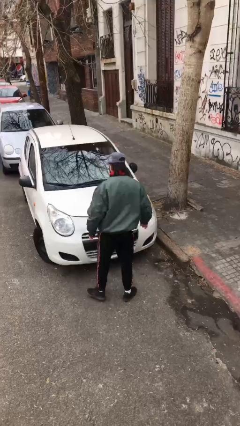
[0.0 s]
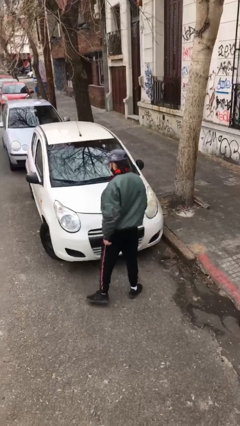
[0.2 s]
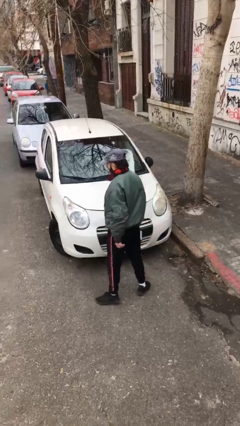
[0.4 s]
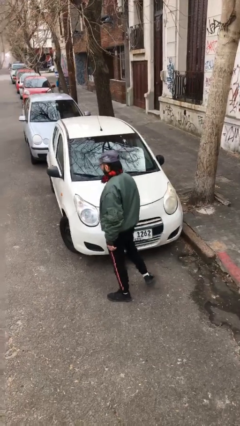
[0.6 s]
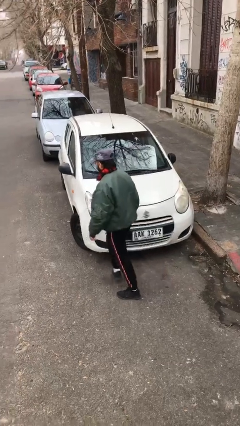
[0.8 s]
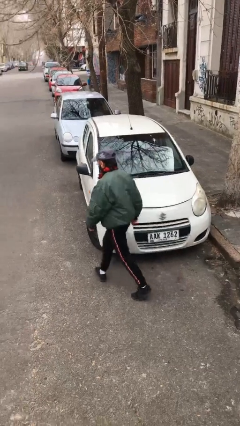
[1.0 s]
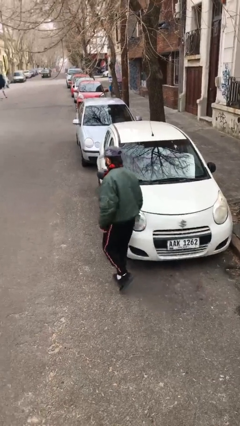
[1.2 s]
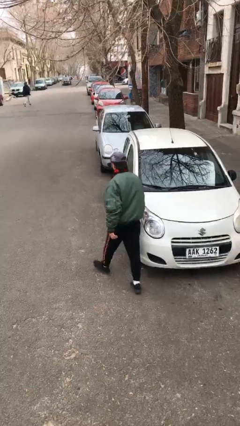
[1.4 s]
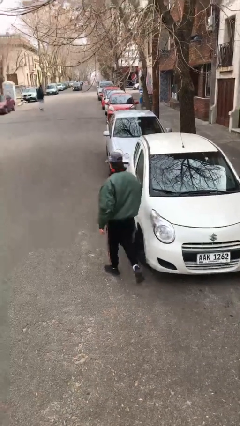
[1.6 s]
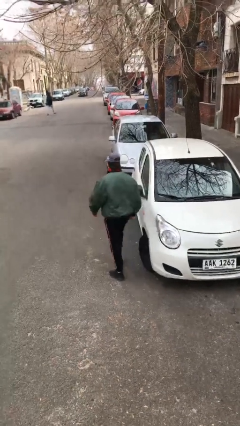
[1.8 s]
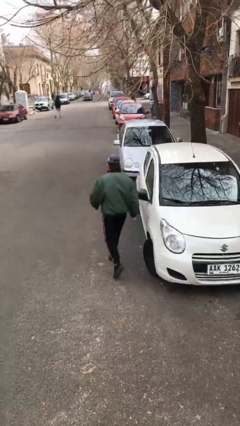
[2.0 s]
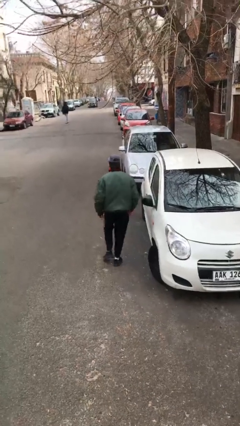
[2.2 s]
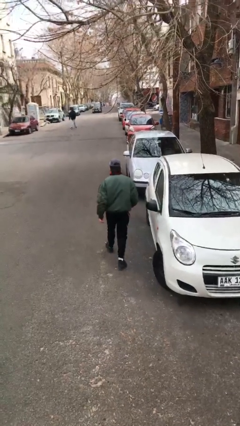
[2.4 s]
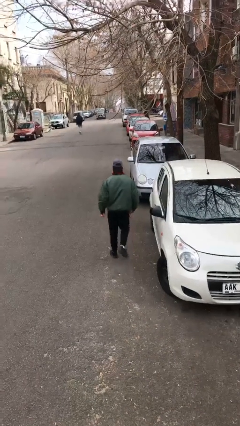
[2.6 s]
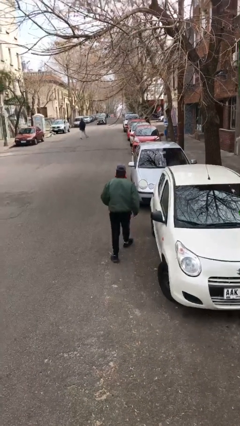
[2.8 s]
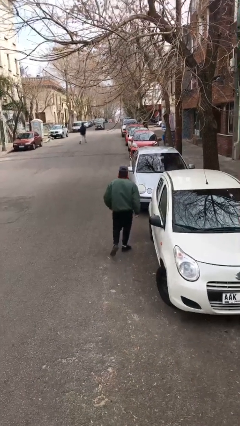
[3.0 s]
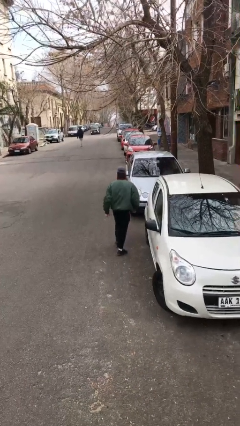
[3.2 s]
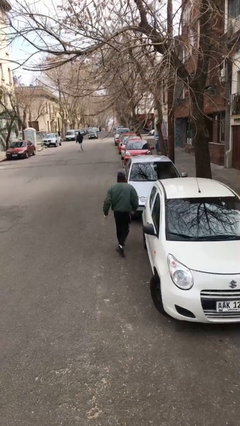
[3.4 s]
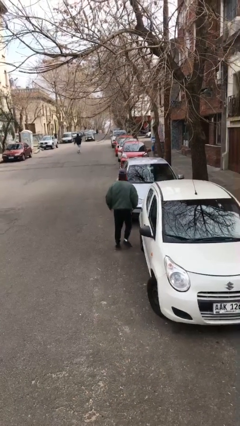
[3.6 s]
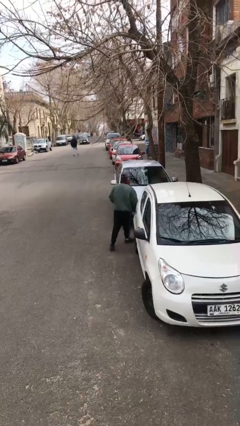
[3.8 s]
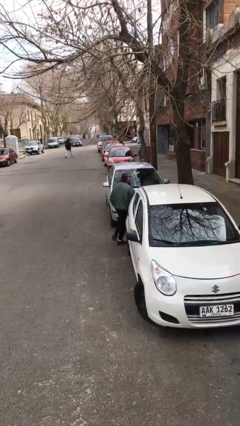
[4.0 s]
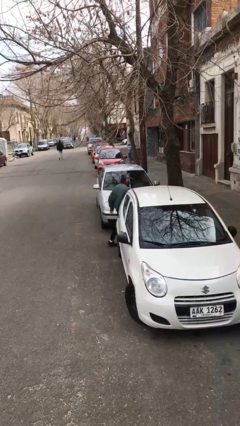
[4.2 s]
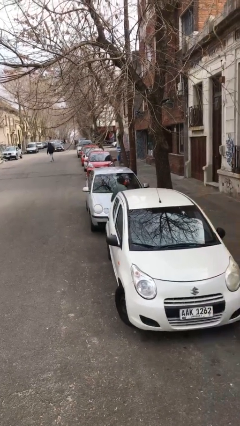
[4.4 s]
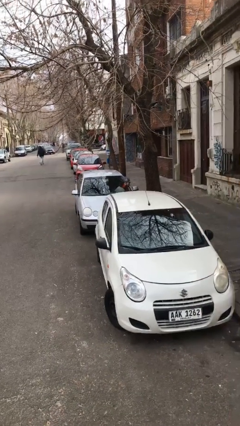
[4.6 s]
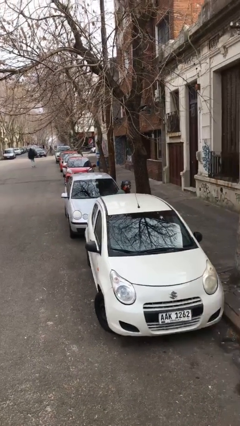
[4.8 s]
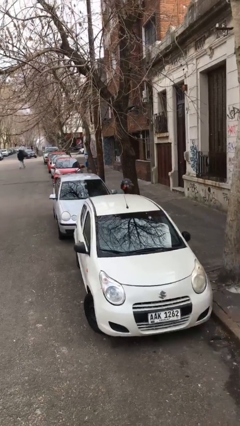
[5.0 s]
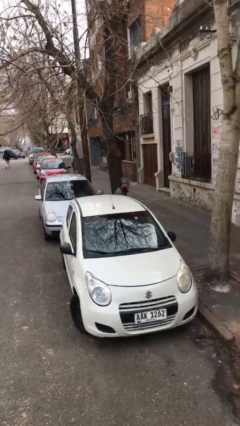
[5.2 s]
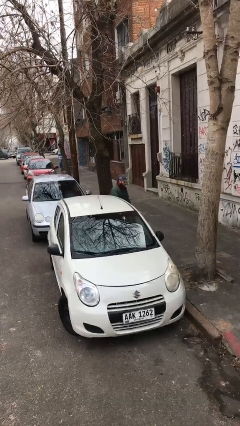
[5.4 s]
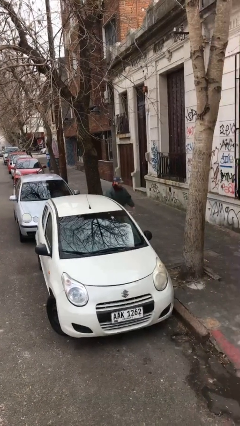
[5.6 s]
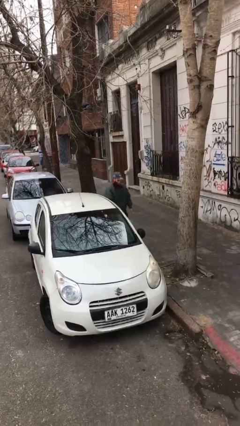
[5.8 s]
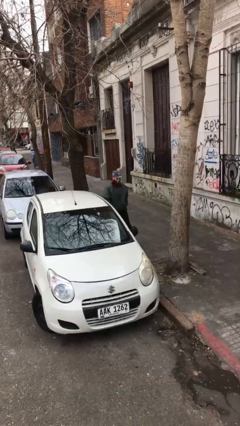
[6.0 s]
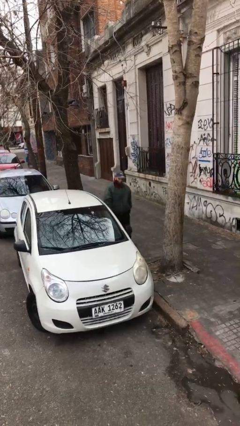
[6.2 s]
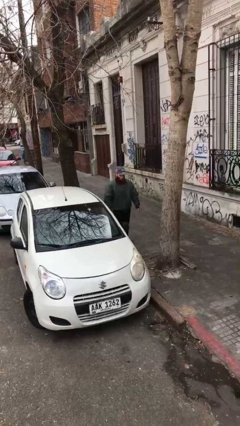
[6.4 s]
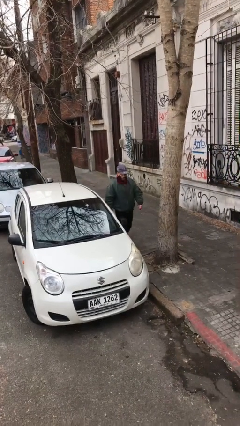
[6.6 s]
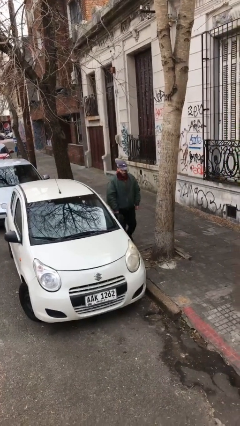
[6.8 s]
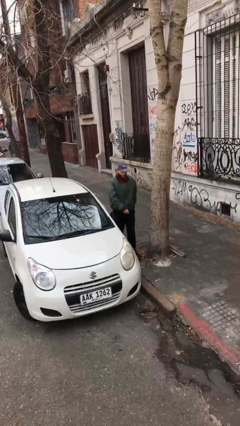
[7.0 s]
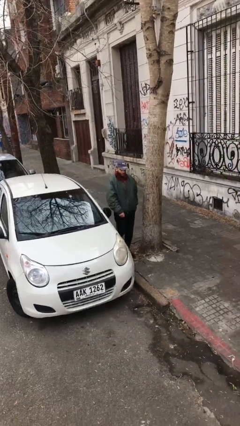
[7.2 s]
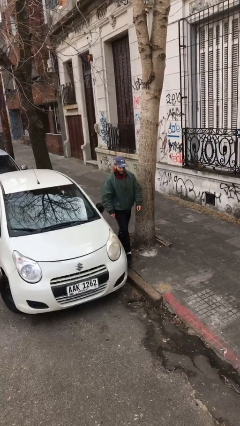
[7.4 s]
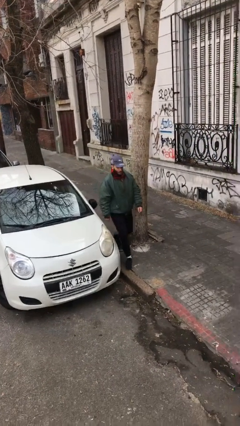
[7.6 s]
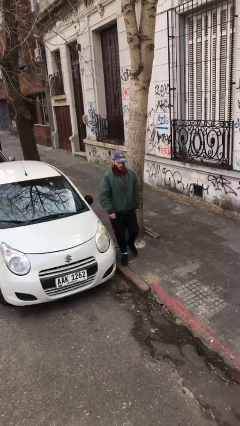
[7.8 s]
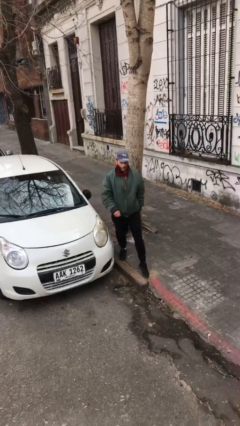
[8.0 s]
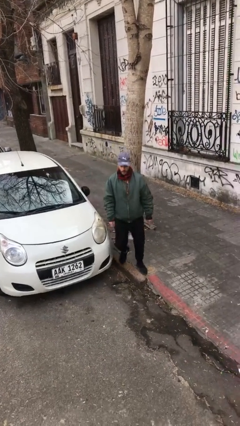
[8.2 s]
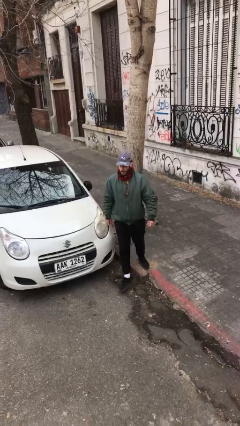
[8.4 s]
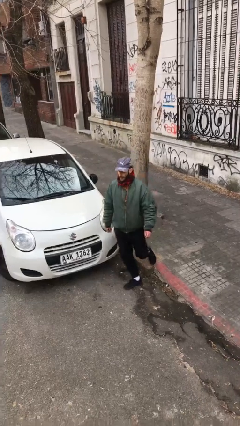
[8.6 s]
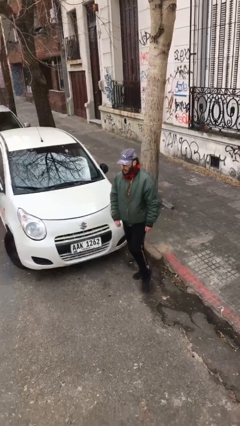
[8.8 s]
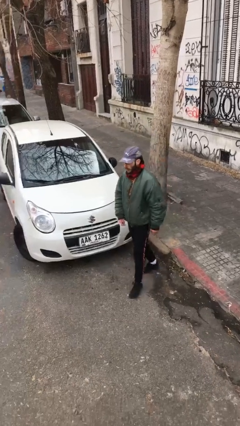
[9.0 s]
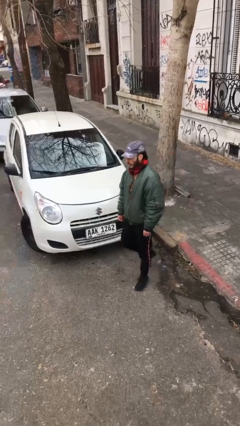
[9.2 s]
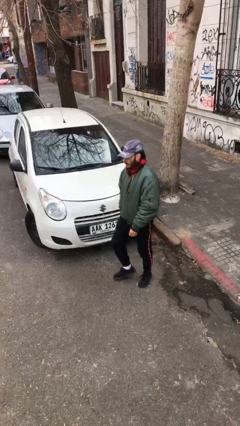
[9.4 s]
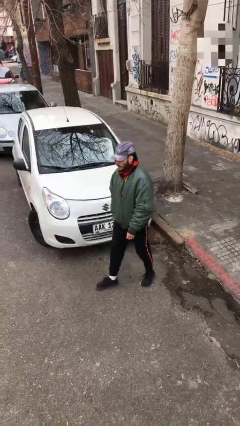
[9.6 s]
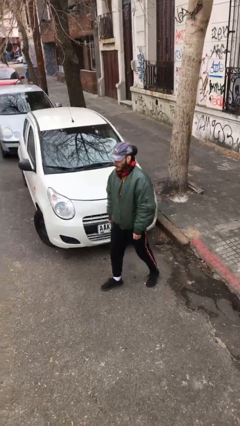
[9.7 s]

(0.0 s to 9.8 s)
person walks around car

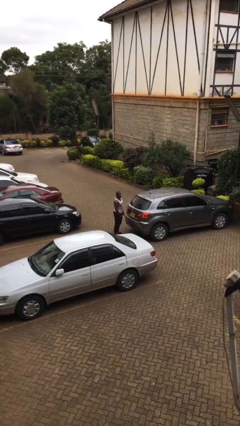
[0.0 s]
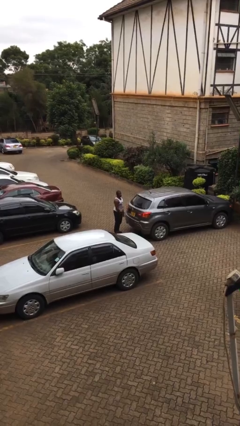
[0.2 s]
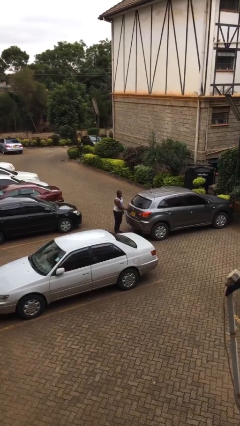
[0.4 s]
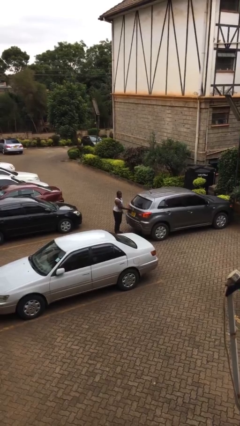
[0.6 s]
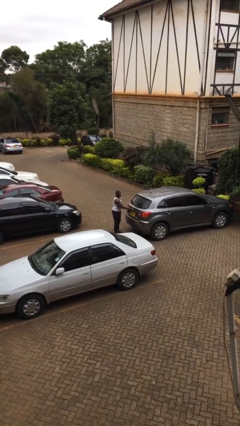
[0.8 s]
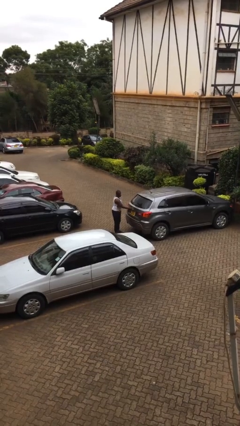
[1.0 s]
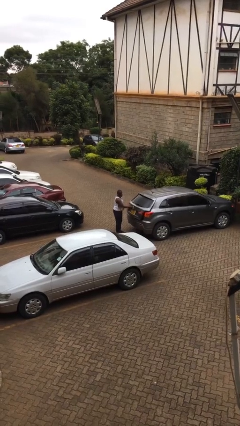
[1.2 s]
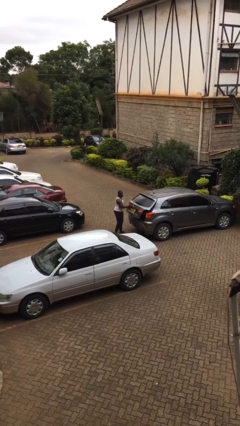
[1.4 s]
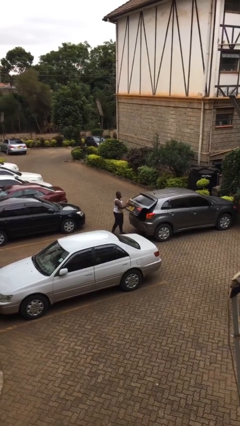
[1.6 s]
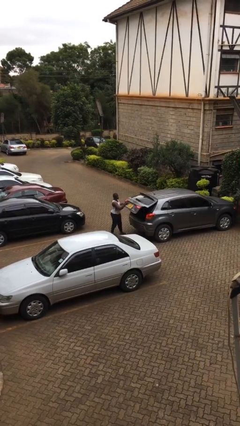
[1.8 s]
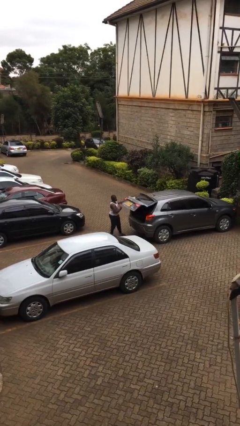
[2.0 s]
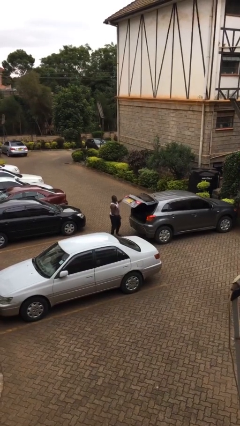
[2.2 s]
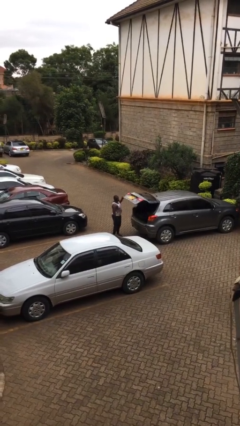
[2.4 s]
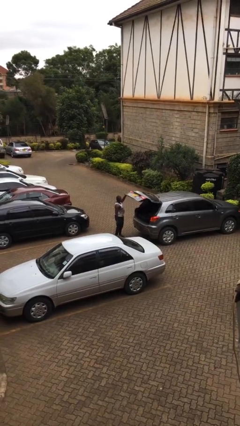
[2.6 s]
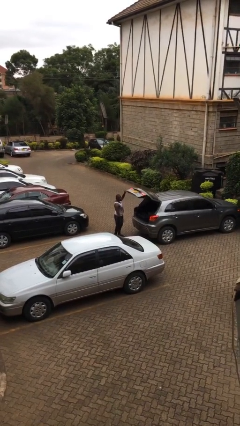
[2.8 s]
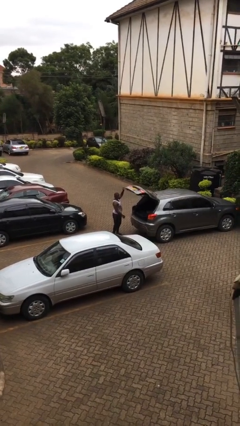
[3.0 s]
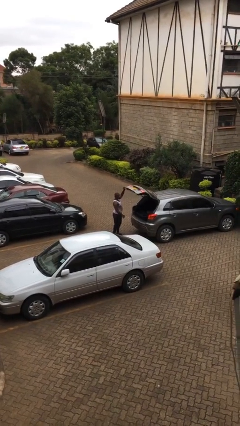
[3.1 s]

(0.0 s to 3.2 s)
person opens car trunk

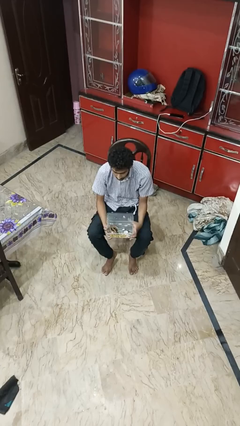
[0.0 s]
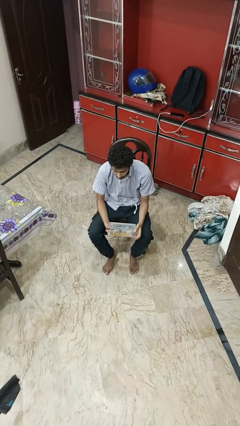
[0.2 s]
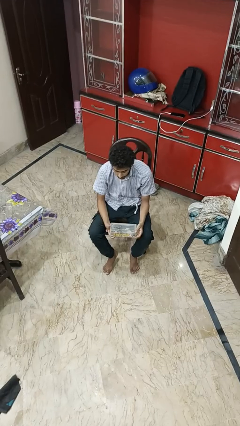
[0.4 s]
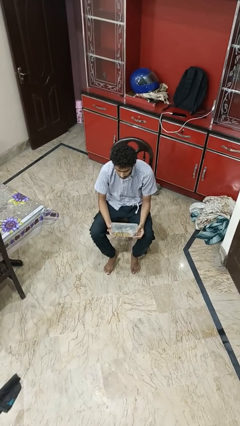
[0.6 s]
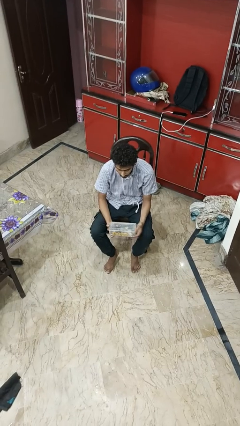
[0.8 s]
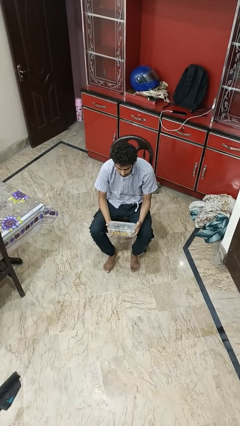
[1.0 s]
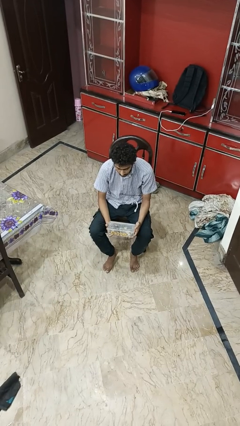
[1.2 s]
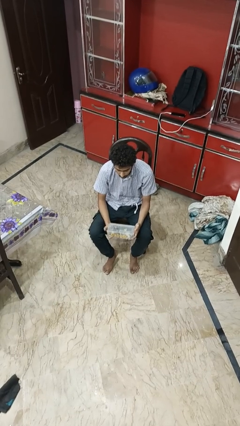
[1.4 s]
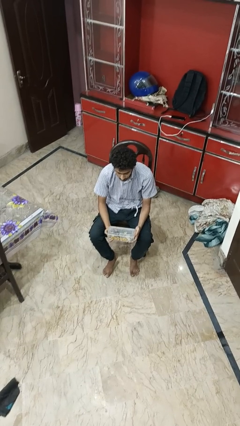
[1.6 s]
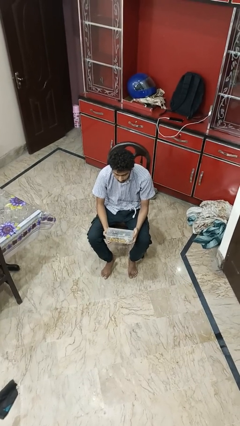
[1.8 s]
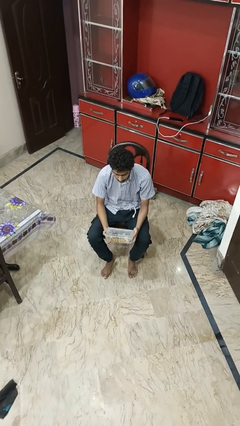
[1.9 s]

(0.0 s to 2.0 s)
person closes jewelry box

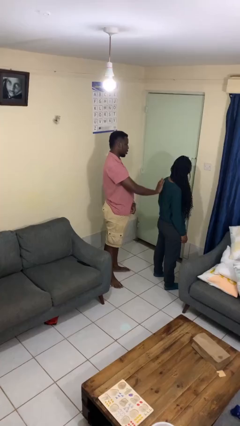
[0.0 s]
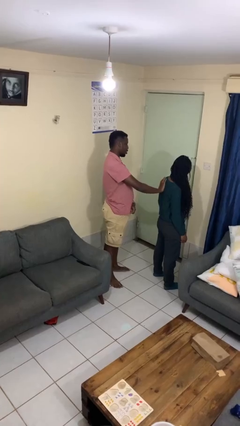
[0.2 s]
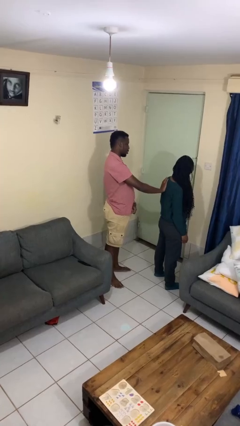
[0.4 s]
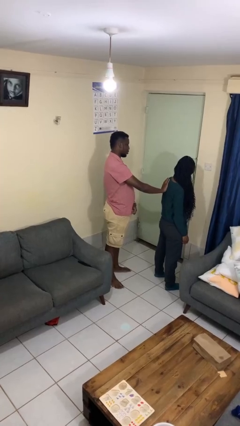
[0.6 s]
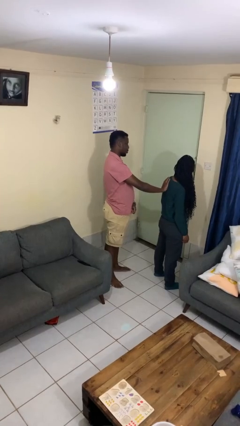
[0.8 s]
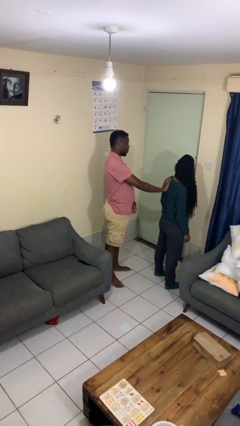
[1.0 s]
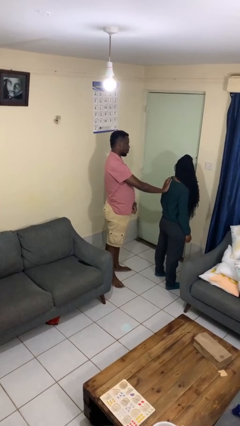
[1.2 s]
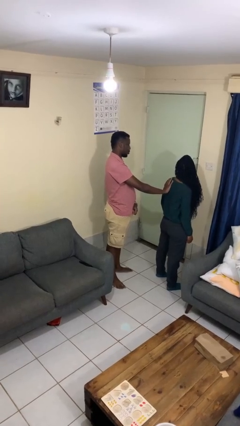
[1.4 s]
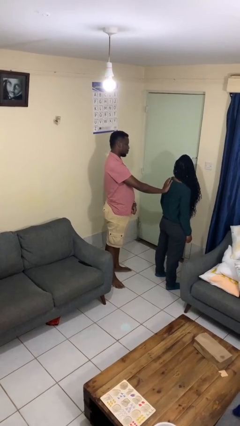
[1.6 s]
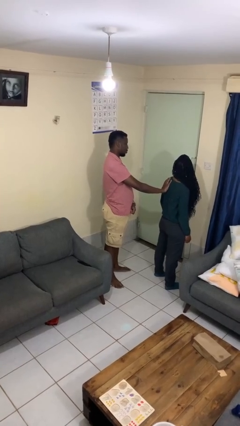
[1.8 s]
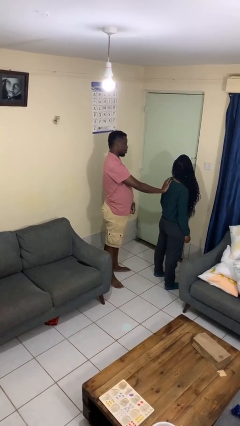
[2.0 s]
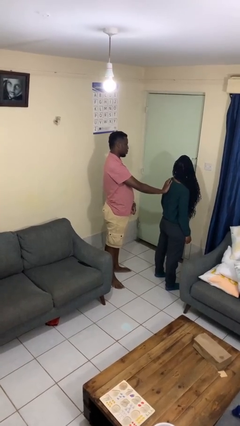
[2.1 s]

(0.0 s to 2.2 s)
person touches back of person

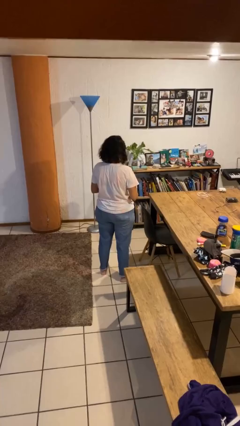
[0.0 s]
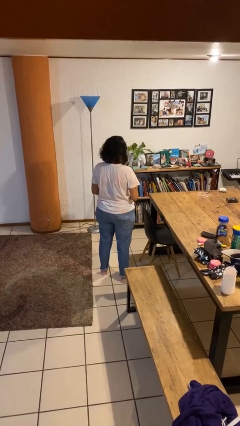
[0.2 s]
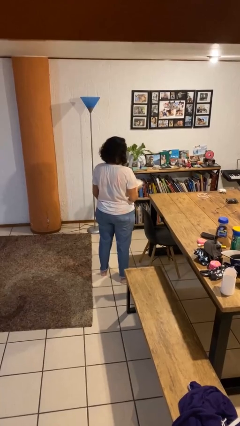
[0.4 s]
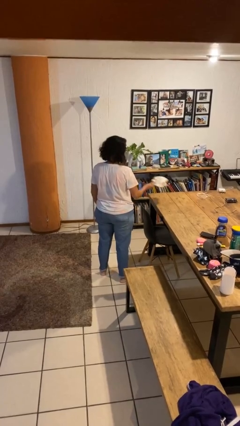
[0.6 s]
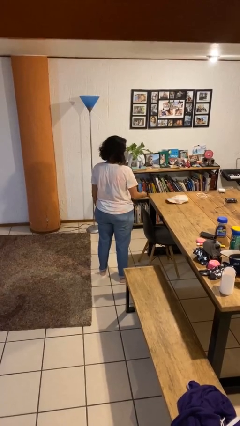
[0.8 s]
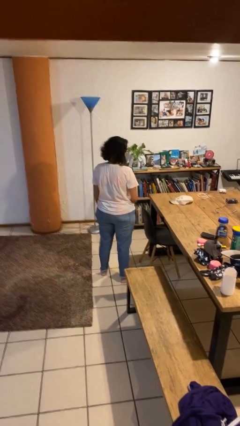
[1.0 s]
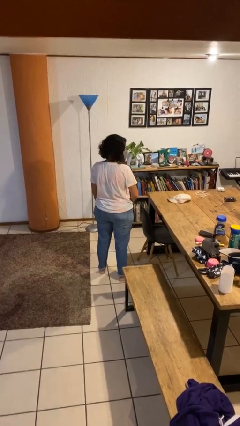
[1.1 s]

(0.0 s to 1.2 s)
person throws object on table
